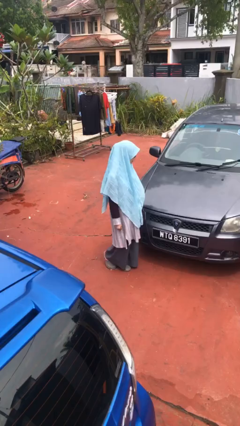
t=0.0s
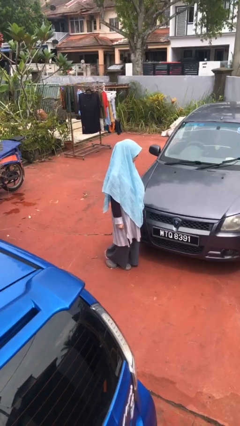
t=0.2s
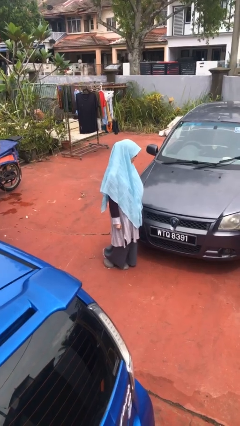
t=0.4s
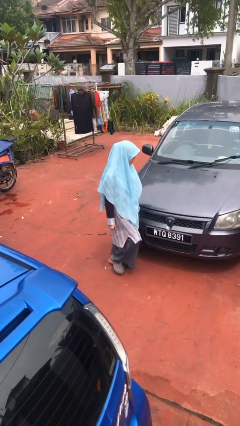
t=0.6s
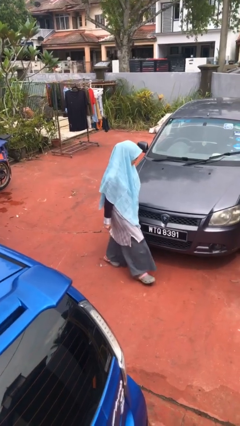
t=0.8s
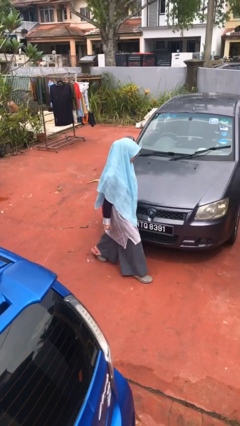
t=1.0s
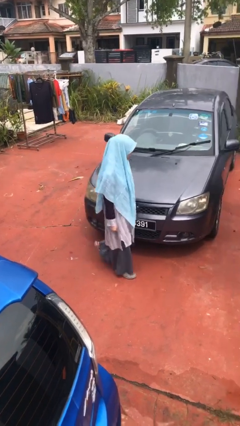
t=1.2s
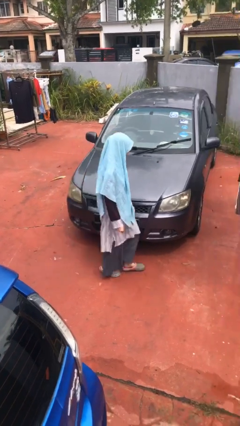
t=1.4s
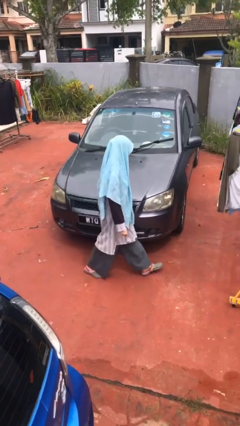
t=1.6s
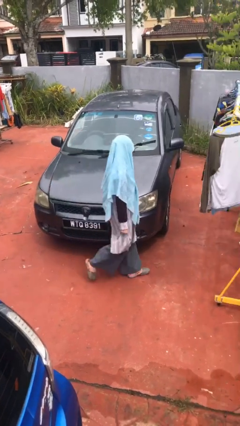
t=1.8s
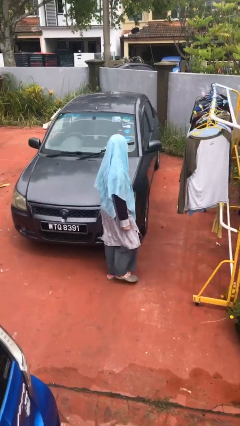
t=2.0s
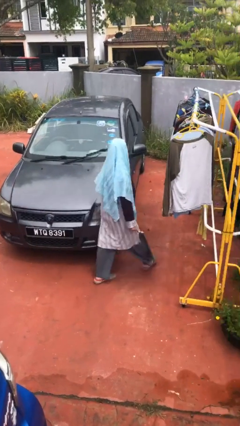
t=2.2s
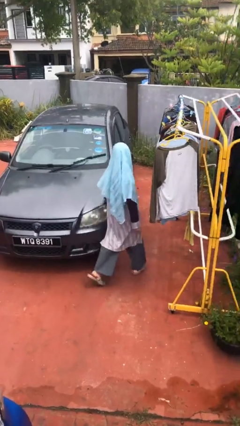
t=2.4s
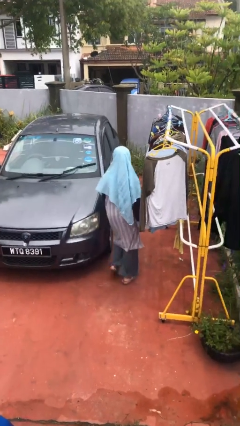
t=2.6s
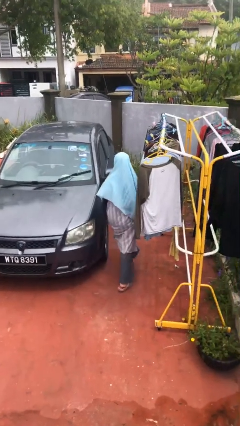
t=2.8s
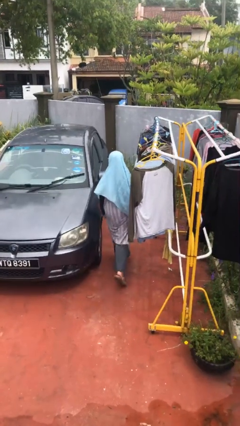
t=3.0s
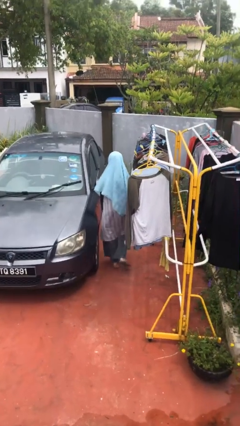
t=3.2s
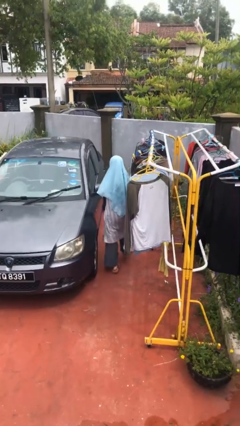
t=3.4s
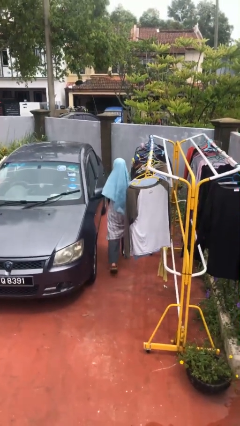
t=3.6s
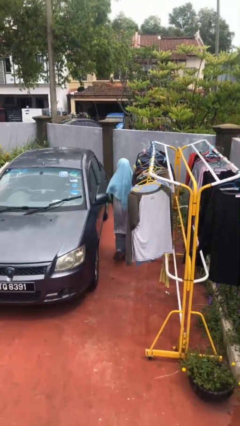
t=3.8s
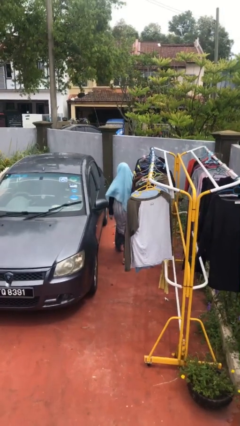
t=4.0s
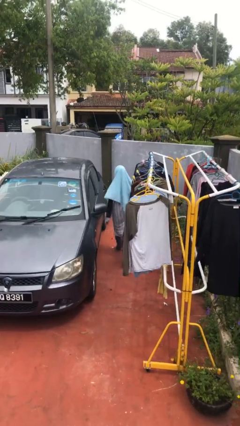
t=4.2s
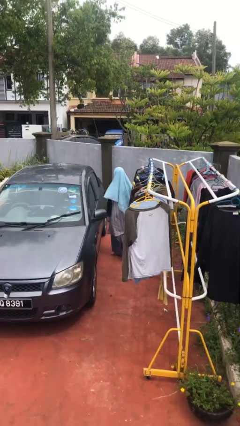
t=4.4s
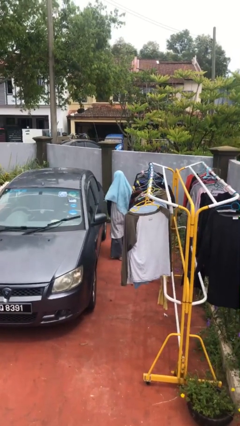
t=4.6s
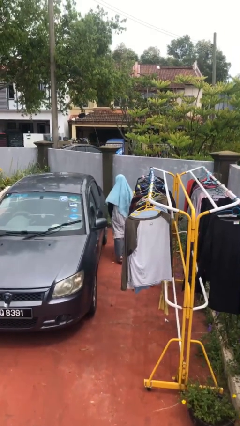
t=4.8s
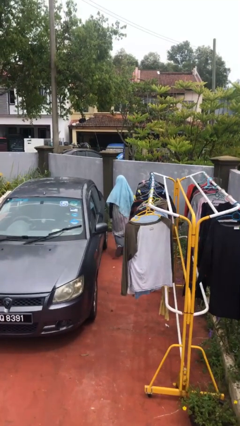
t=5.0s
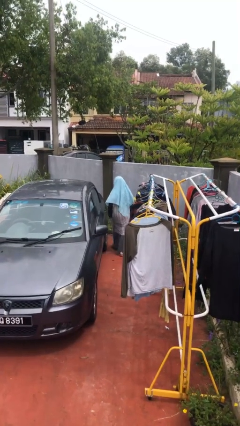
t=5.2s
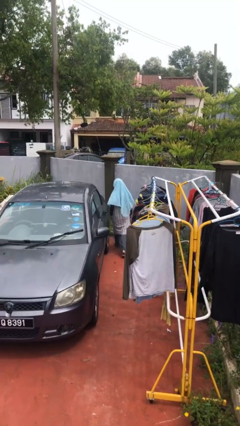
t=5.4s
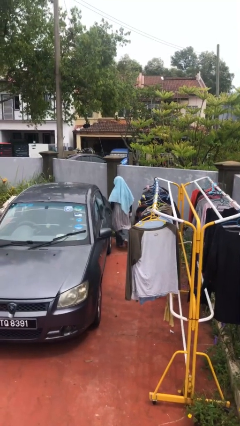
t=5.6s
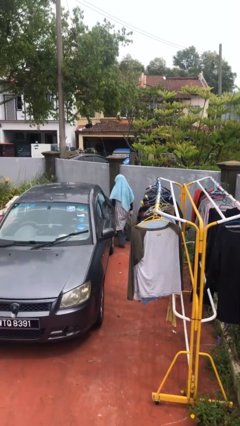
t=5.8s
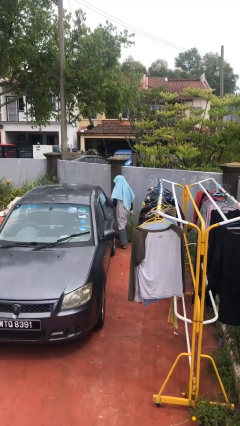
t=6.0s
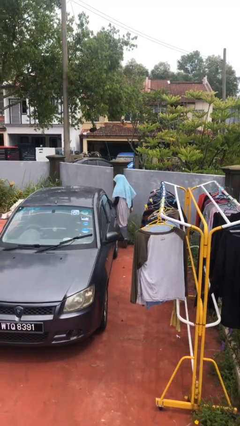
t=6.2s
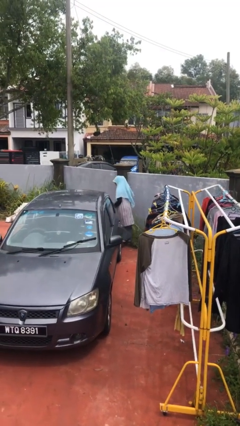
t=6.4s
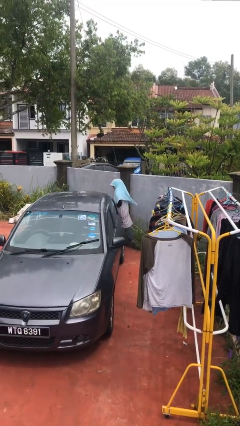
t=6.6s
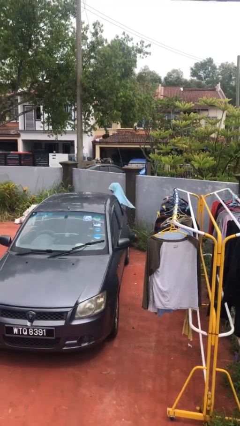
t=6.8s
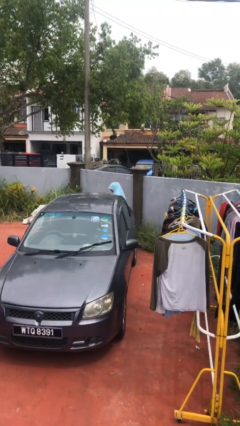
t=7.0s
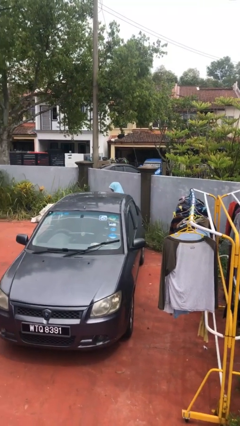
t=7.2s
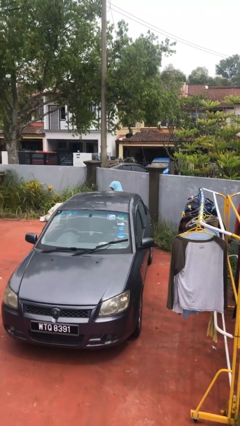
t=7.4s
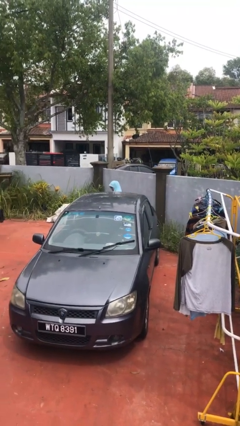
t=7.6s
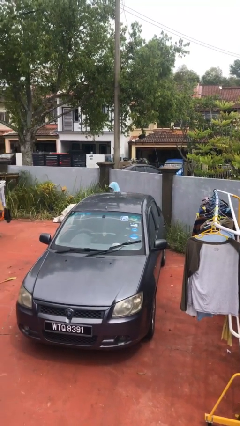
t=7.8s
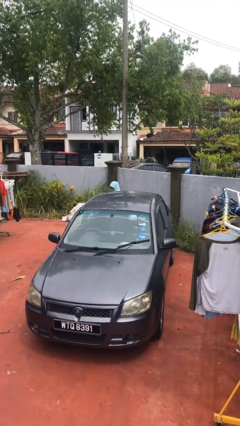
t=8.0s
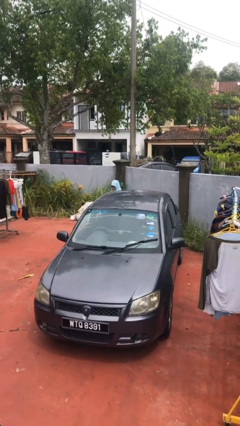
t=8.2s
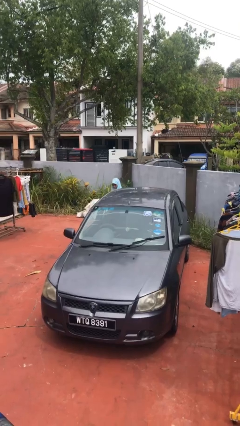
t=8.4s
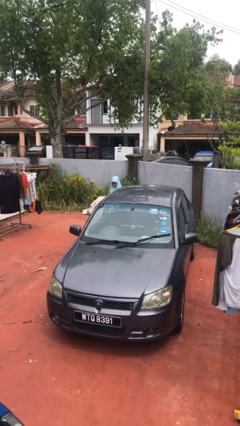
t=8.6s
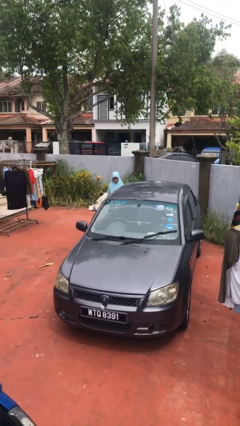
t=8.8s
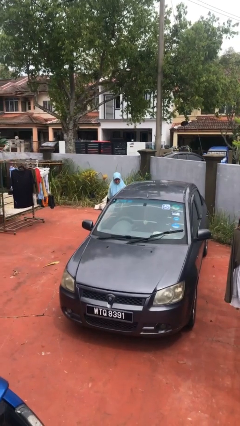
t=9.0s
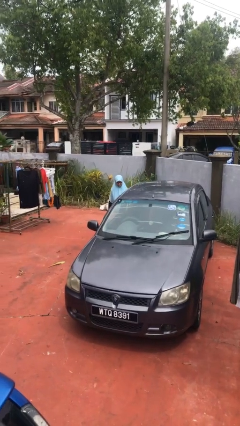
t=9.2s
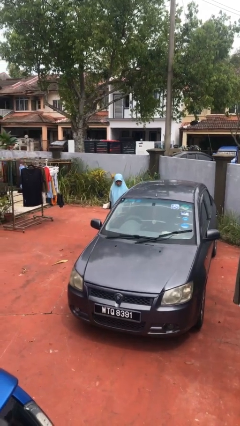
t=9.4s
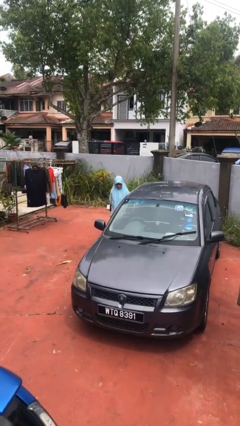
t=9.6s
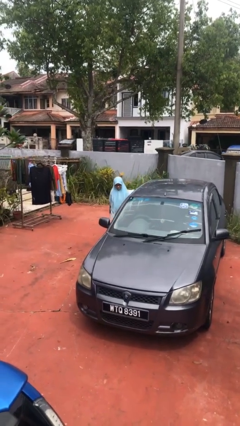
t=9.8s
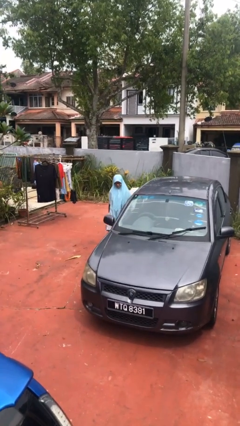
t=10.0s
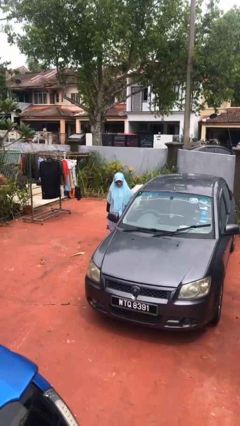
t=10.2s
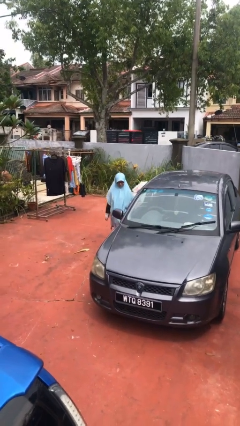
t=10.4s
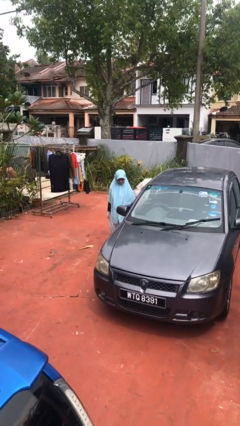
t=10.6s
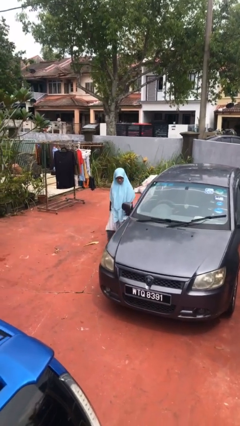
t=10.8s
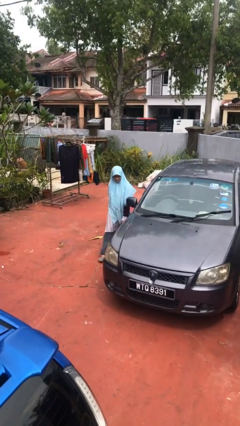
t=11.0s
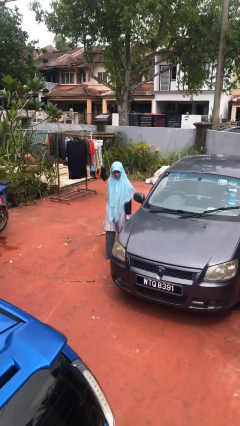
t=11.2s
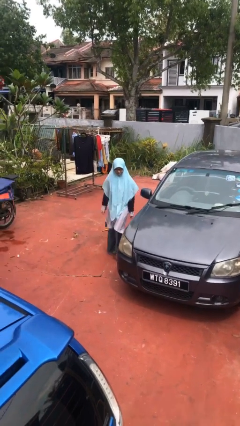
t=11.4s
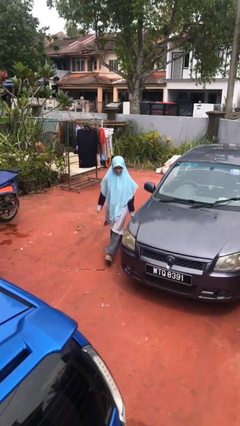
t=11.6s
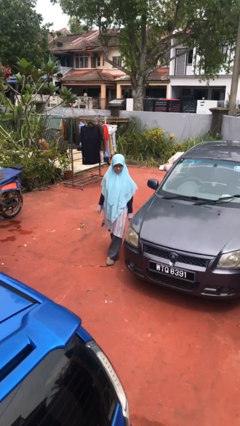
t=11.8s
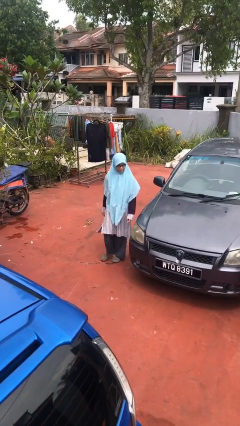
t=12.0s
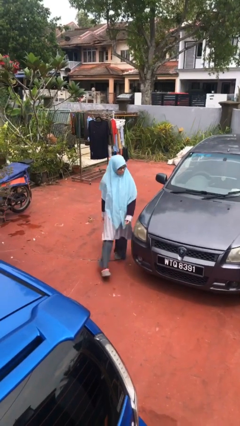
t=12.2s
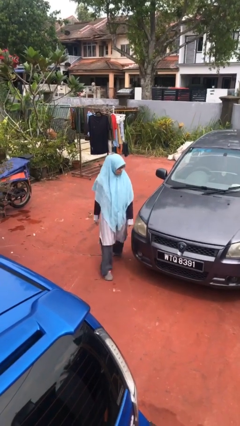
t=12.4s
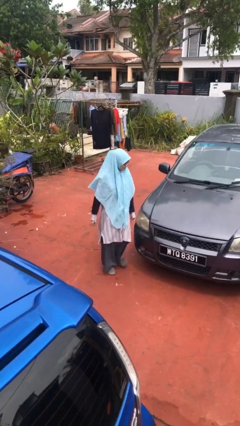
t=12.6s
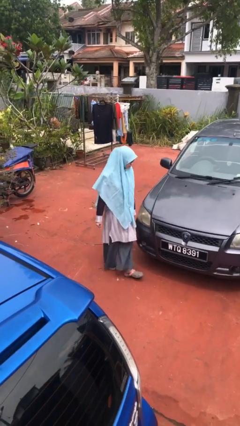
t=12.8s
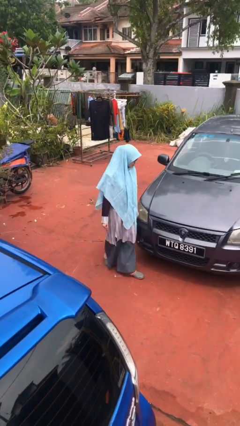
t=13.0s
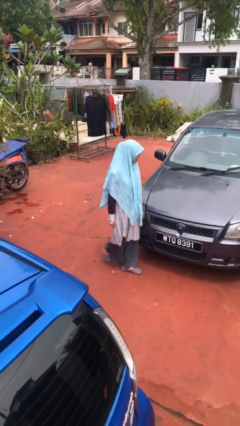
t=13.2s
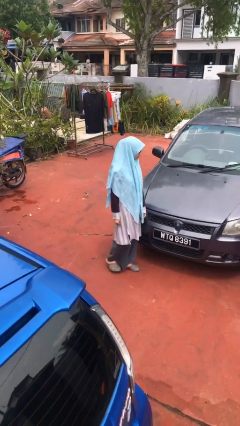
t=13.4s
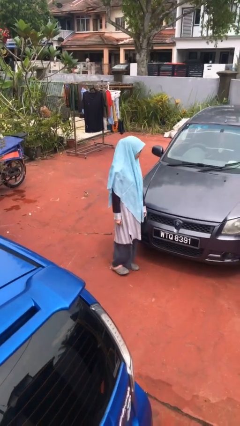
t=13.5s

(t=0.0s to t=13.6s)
person walks around car

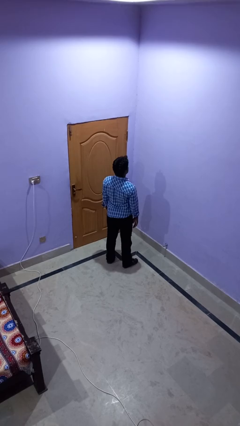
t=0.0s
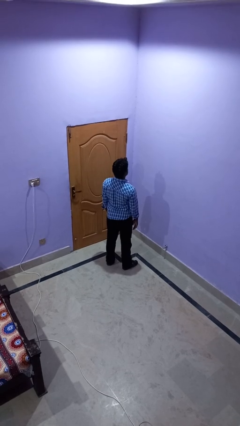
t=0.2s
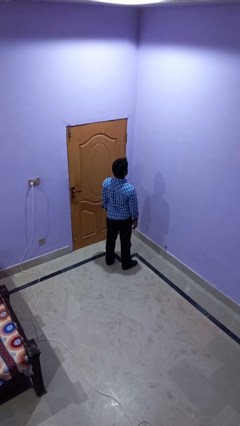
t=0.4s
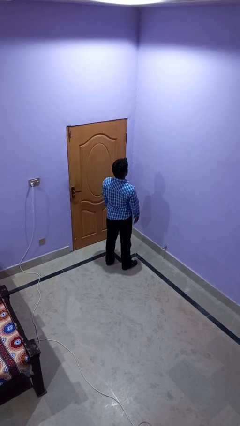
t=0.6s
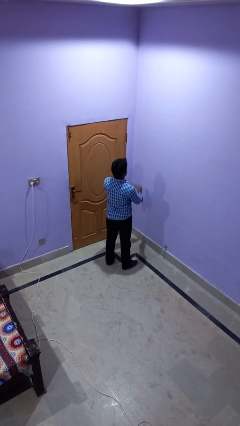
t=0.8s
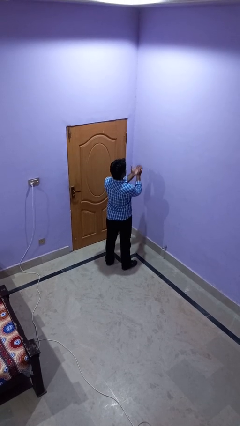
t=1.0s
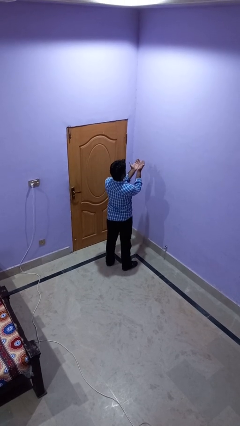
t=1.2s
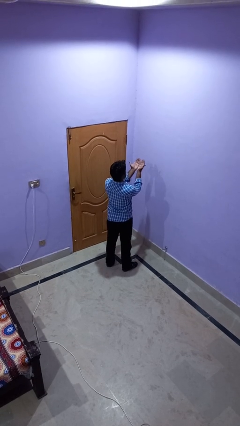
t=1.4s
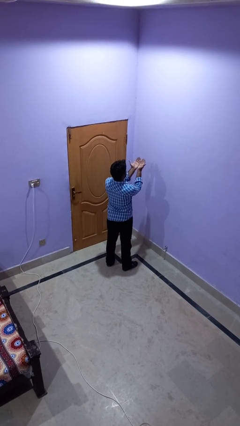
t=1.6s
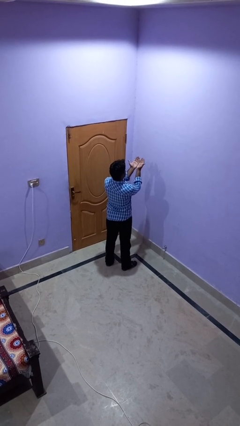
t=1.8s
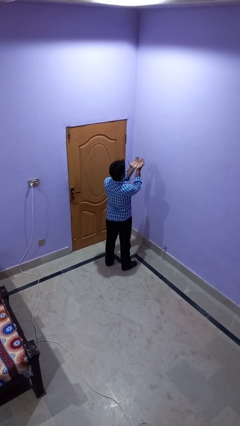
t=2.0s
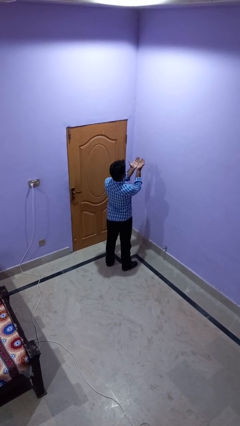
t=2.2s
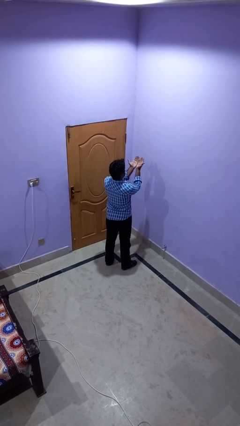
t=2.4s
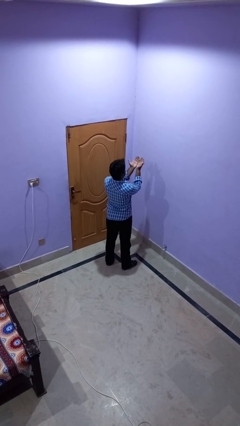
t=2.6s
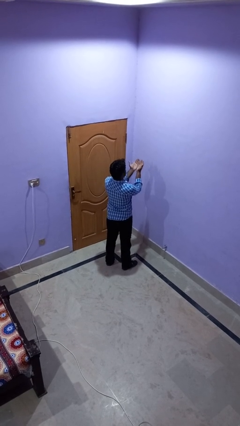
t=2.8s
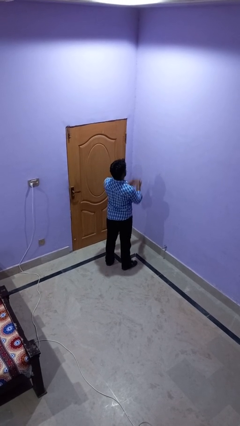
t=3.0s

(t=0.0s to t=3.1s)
person prays

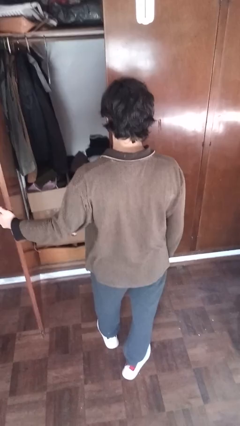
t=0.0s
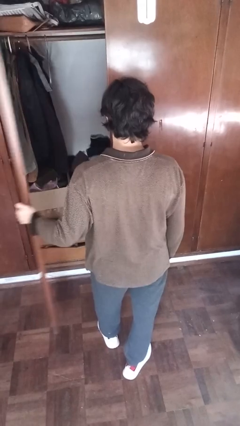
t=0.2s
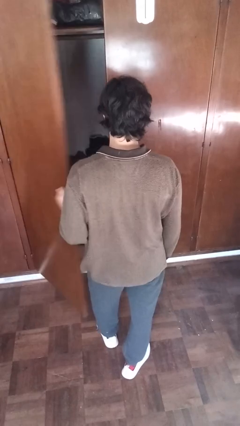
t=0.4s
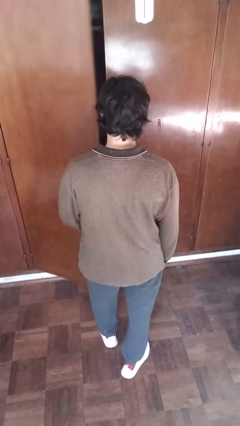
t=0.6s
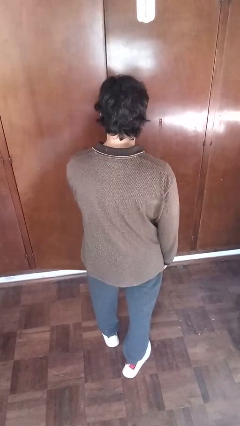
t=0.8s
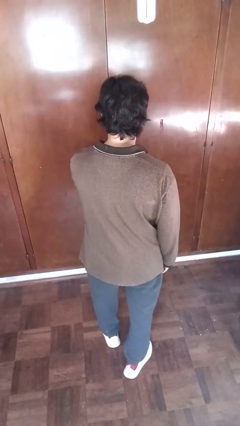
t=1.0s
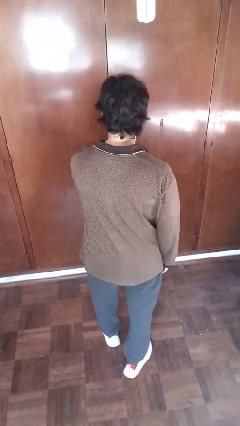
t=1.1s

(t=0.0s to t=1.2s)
person closes closet door

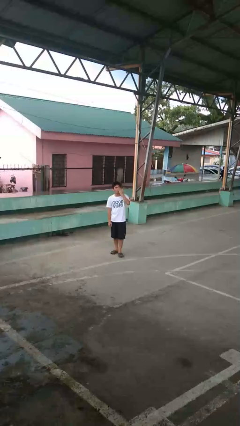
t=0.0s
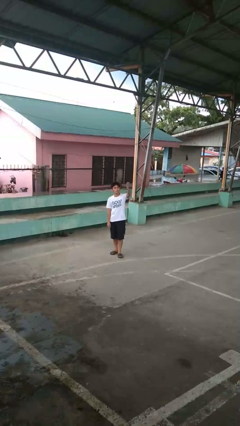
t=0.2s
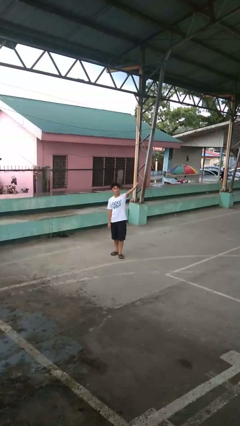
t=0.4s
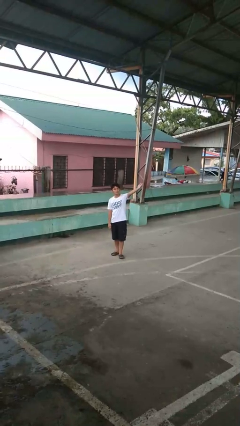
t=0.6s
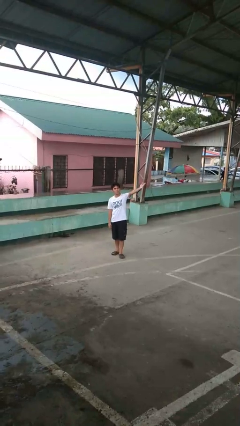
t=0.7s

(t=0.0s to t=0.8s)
person gestures blow kiss
